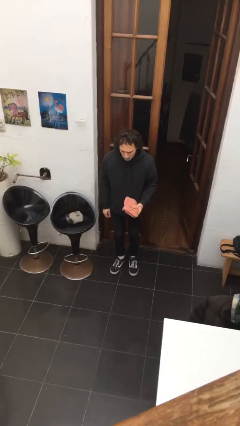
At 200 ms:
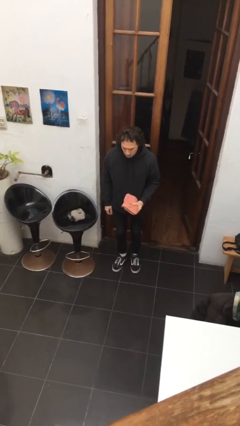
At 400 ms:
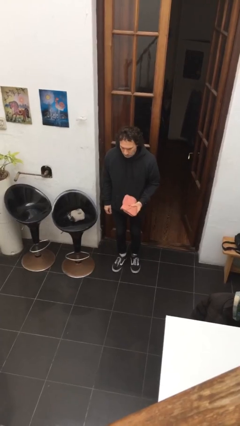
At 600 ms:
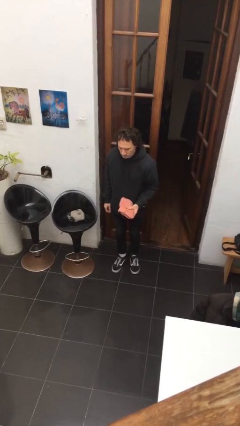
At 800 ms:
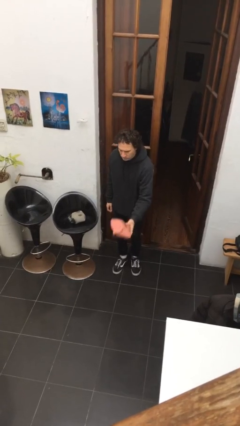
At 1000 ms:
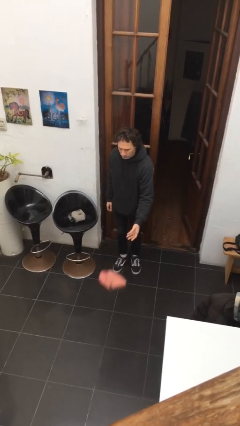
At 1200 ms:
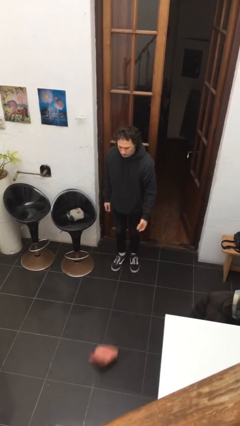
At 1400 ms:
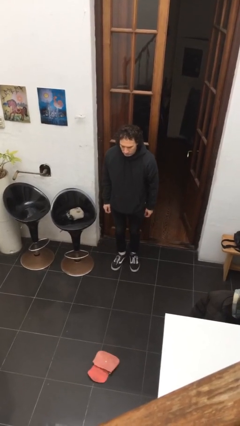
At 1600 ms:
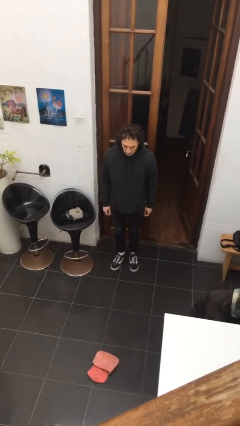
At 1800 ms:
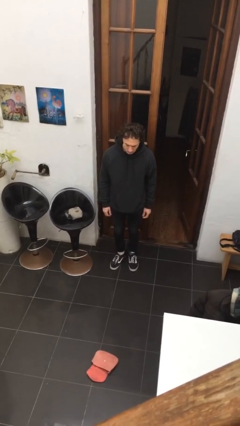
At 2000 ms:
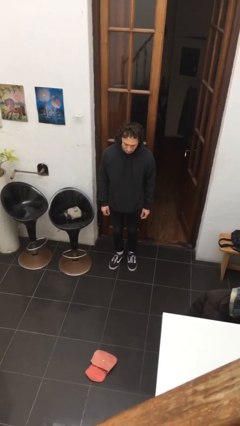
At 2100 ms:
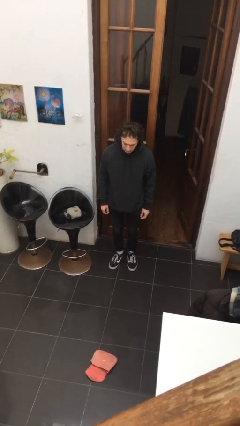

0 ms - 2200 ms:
person throws object to ground

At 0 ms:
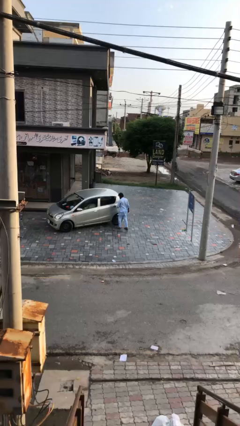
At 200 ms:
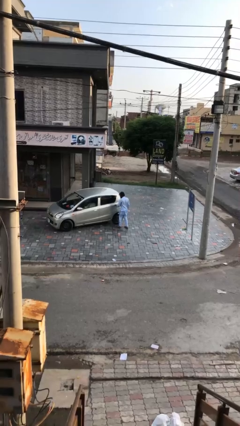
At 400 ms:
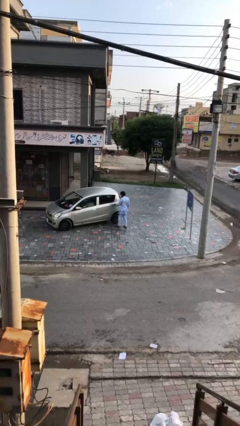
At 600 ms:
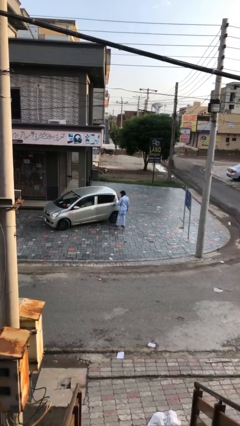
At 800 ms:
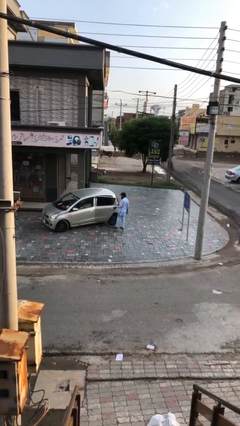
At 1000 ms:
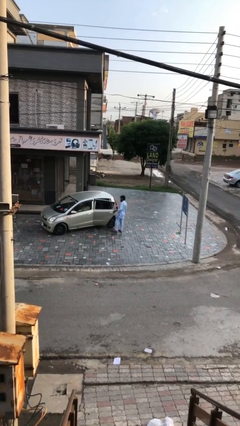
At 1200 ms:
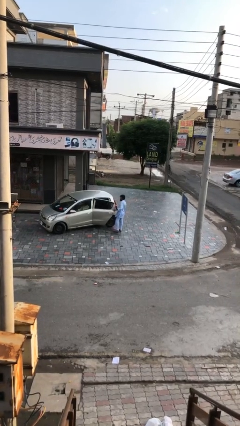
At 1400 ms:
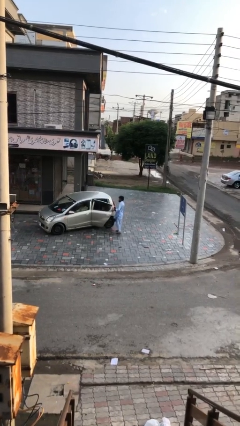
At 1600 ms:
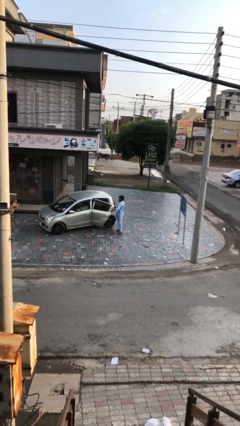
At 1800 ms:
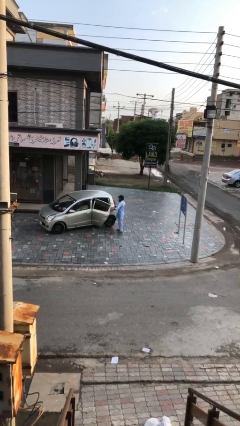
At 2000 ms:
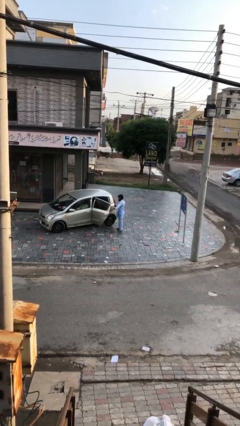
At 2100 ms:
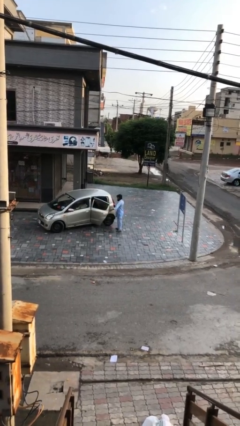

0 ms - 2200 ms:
person opens car door

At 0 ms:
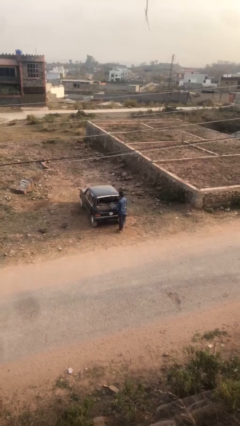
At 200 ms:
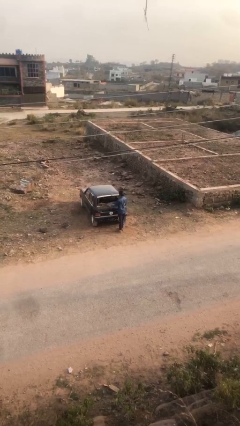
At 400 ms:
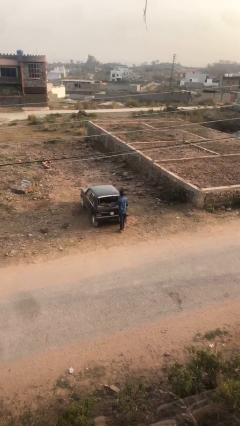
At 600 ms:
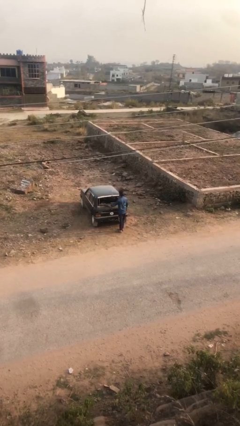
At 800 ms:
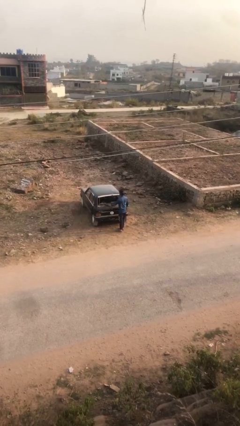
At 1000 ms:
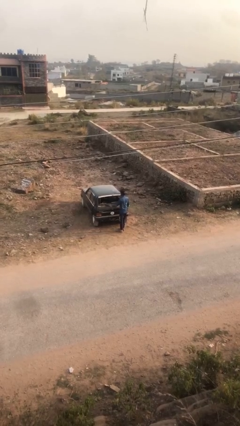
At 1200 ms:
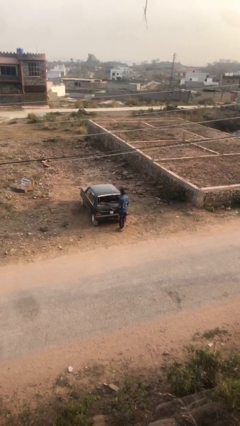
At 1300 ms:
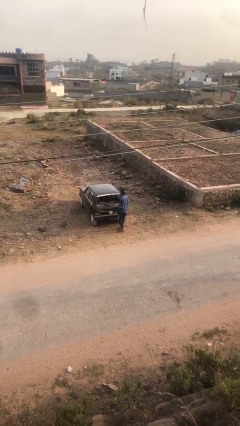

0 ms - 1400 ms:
person loads car

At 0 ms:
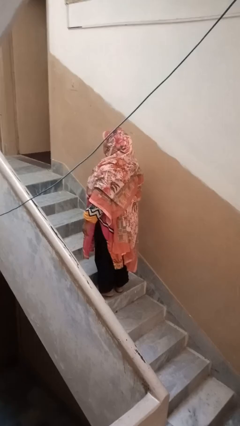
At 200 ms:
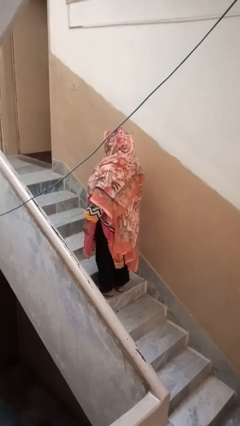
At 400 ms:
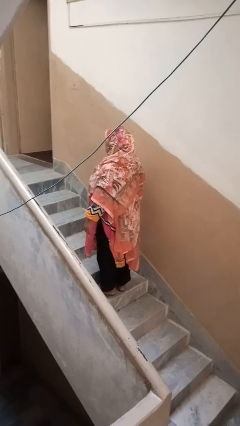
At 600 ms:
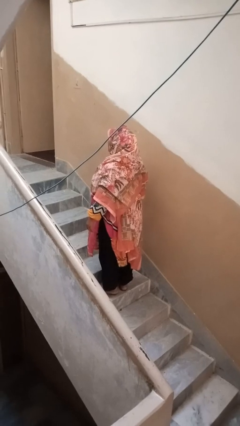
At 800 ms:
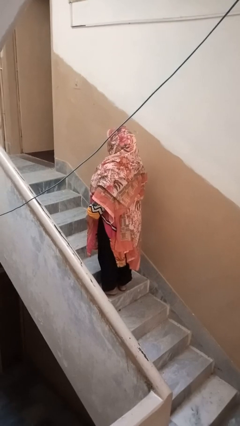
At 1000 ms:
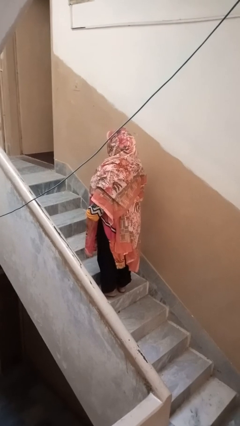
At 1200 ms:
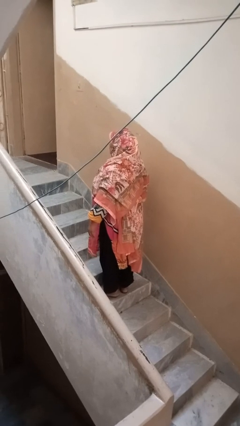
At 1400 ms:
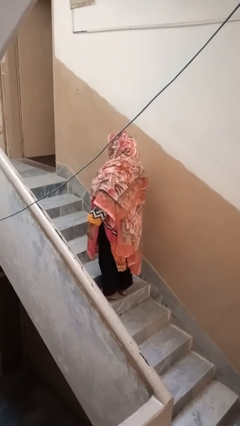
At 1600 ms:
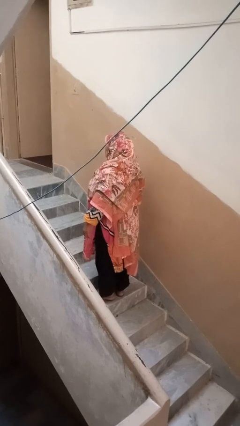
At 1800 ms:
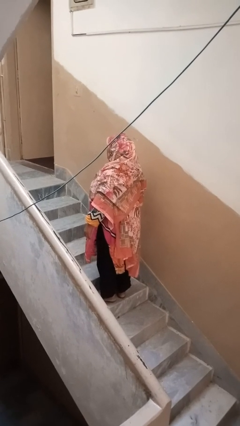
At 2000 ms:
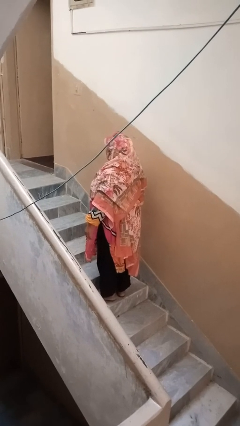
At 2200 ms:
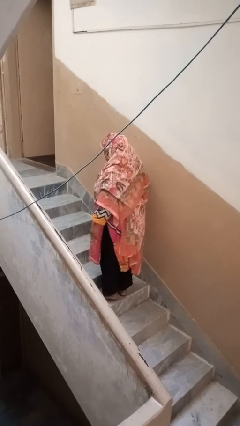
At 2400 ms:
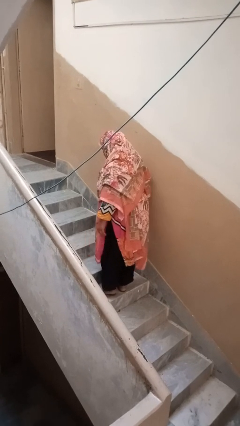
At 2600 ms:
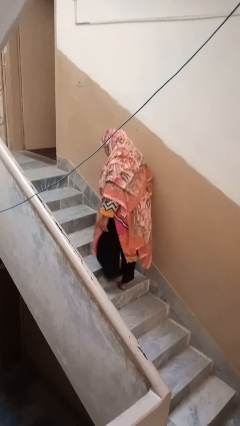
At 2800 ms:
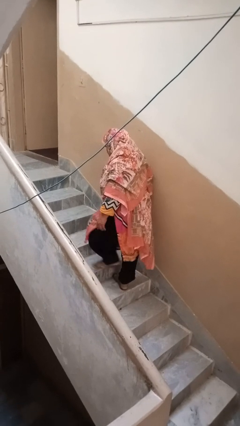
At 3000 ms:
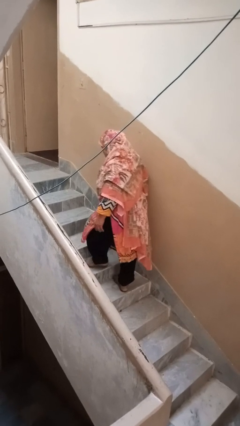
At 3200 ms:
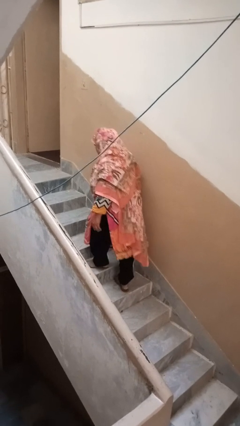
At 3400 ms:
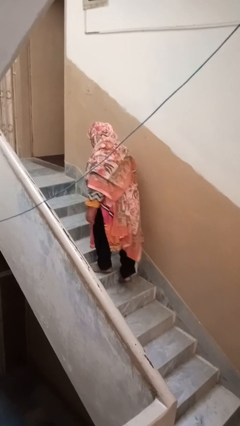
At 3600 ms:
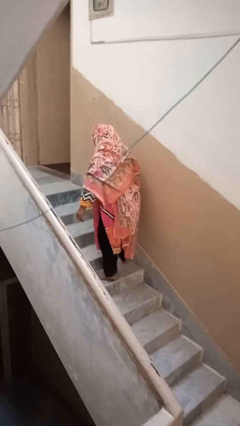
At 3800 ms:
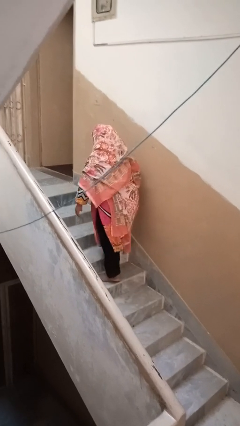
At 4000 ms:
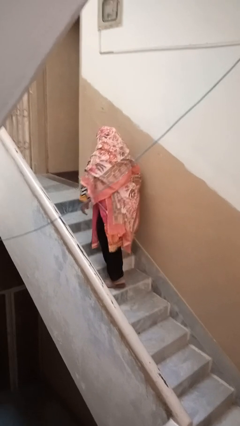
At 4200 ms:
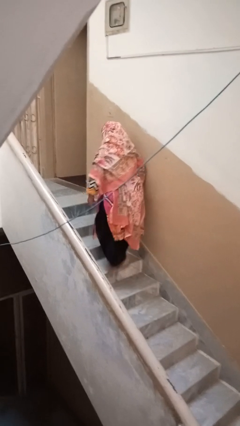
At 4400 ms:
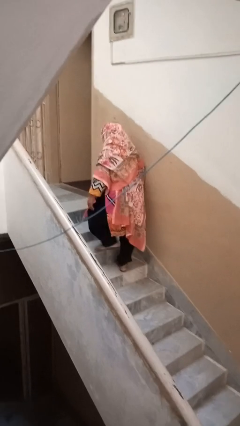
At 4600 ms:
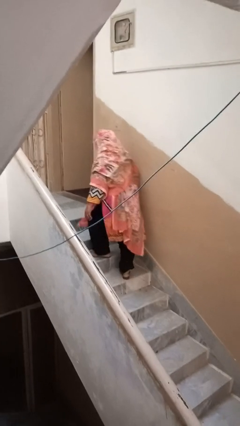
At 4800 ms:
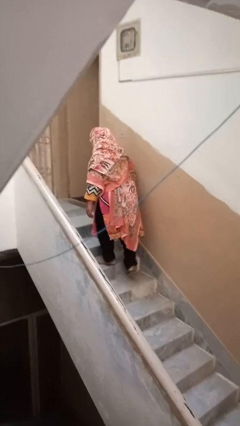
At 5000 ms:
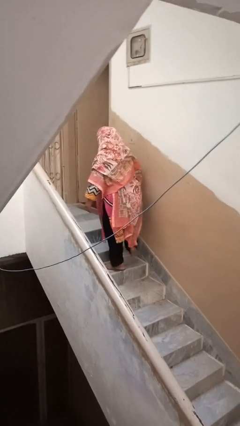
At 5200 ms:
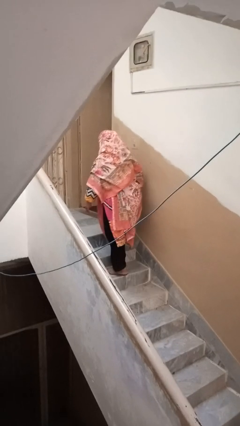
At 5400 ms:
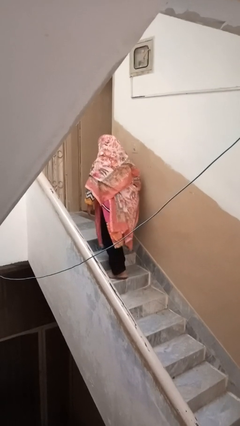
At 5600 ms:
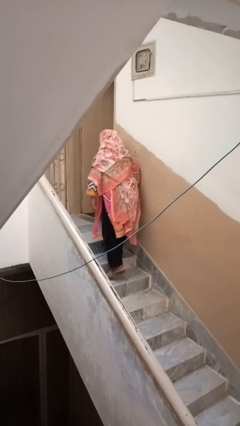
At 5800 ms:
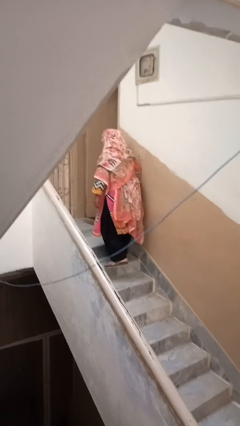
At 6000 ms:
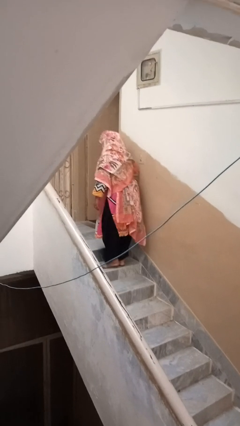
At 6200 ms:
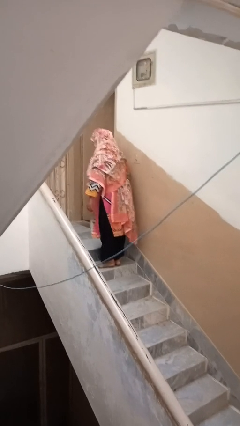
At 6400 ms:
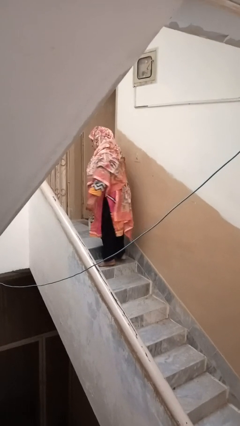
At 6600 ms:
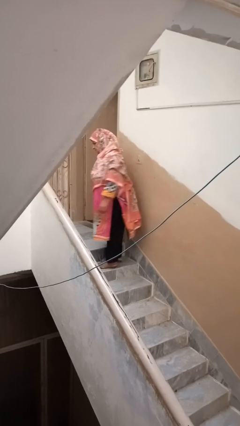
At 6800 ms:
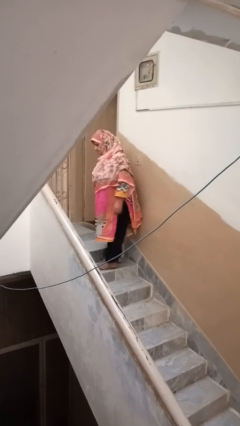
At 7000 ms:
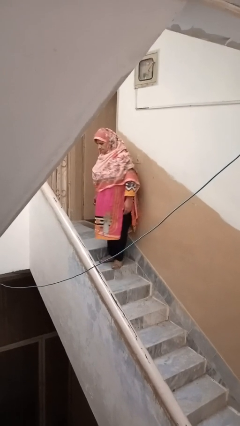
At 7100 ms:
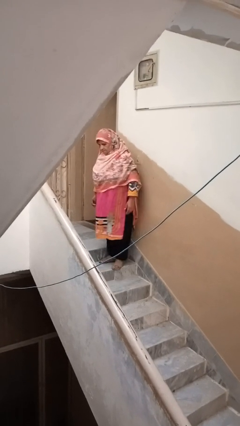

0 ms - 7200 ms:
person climbs up stairs

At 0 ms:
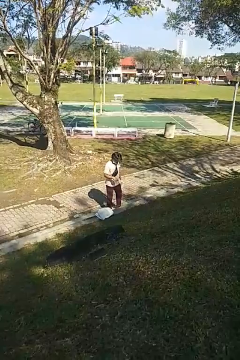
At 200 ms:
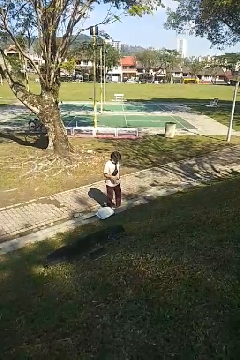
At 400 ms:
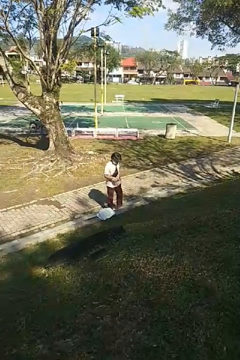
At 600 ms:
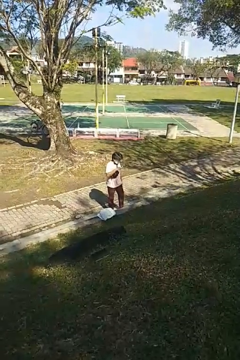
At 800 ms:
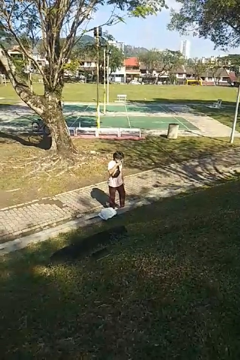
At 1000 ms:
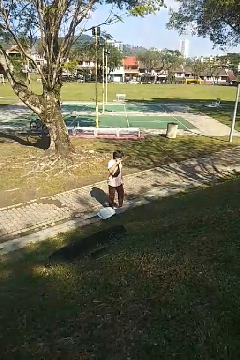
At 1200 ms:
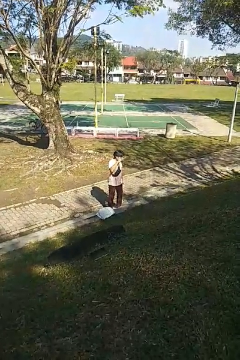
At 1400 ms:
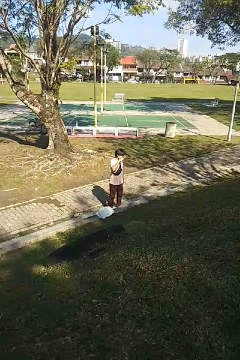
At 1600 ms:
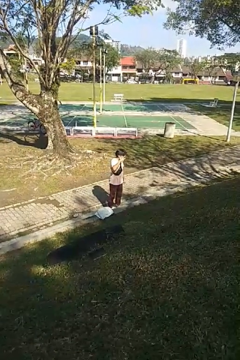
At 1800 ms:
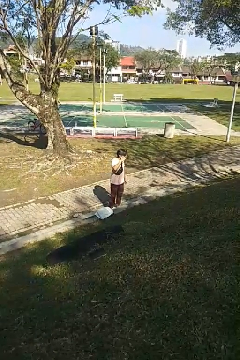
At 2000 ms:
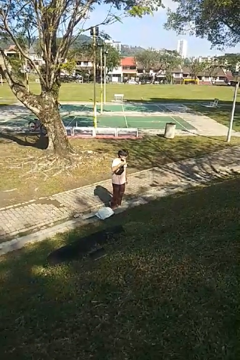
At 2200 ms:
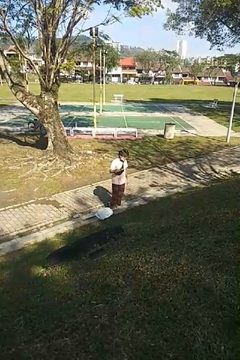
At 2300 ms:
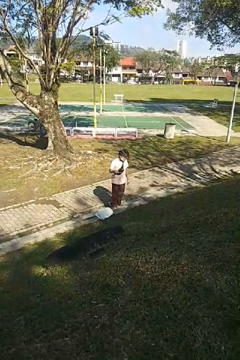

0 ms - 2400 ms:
person brushes teeth

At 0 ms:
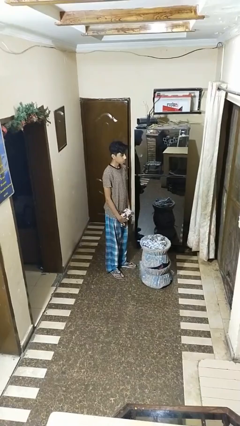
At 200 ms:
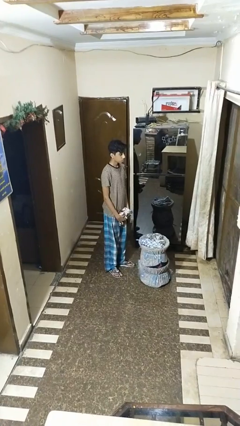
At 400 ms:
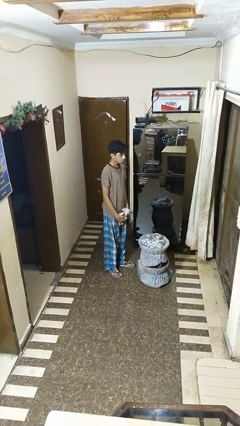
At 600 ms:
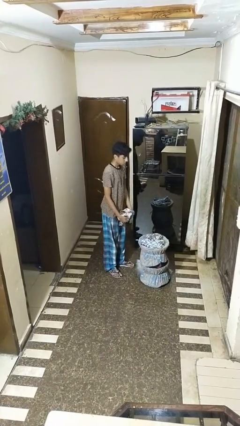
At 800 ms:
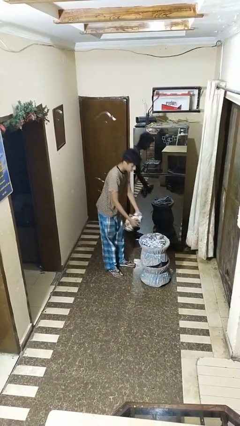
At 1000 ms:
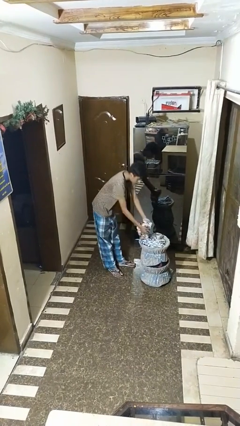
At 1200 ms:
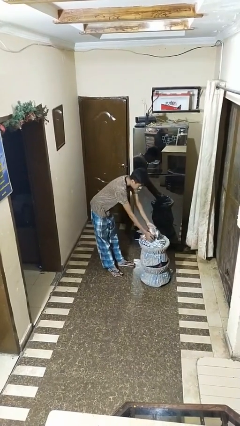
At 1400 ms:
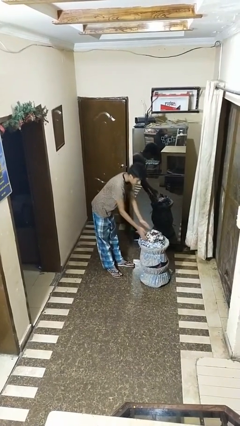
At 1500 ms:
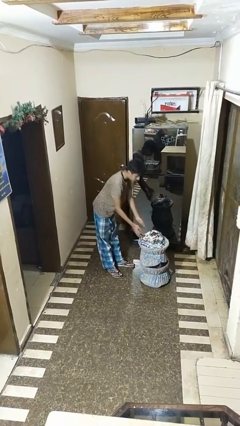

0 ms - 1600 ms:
person puts object into basket

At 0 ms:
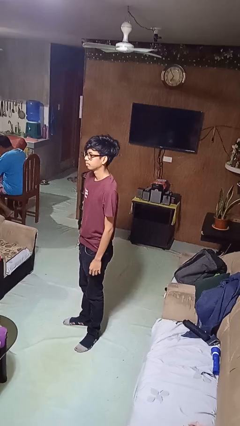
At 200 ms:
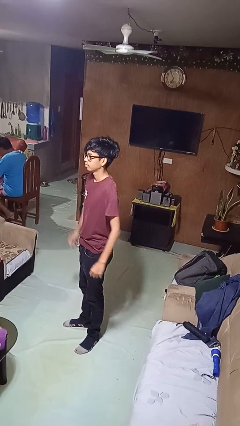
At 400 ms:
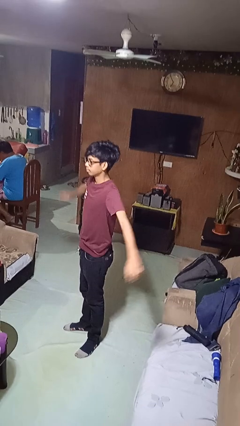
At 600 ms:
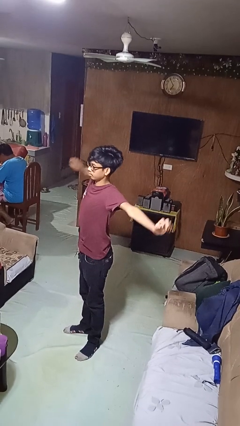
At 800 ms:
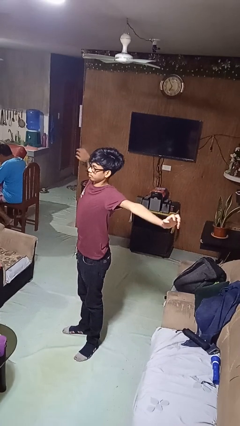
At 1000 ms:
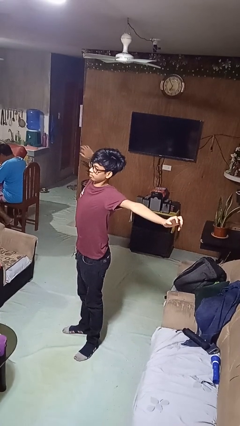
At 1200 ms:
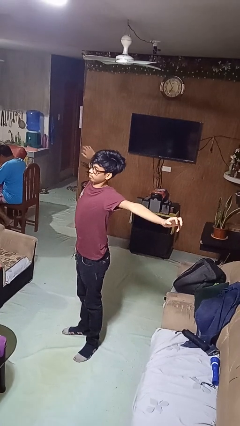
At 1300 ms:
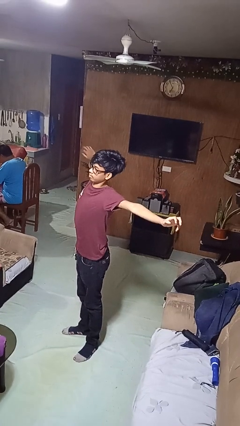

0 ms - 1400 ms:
person stretches arms to side
